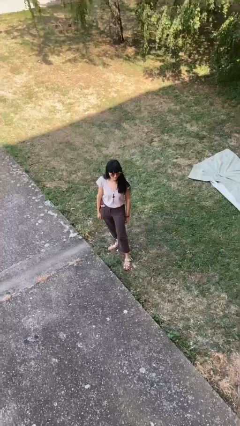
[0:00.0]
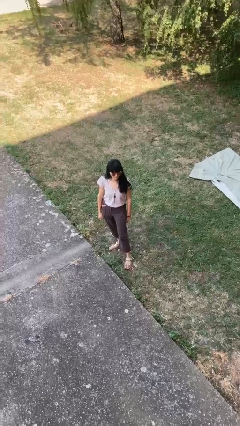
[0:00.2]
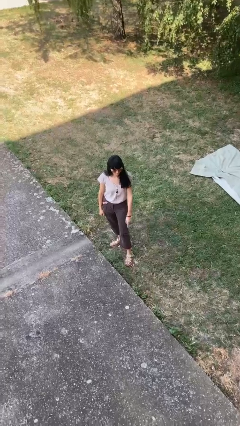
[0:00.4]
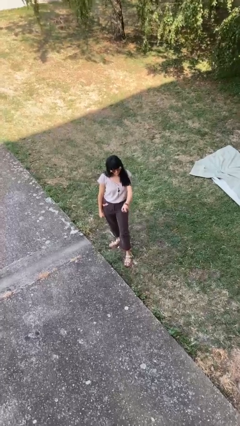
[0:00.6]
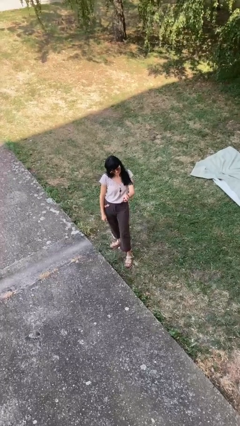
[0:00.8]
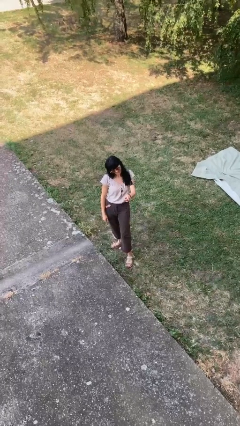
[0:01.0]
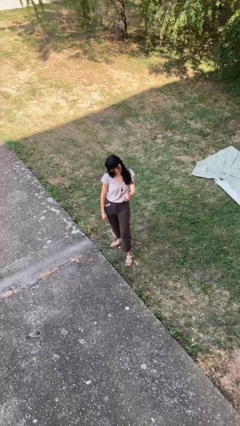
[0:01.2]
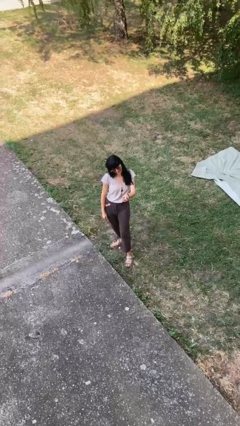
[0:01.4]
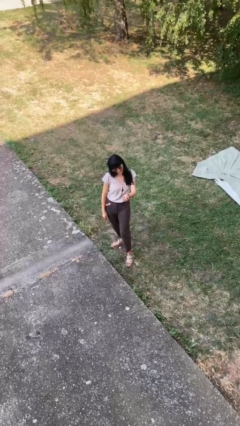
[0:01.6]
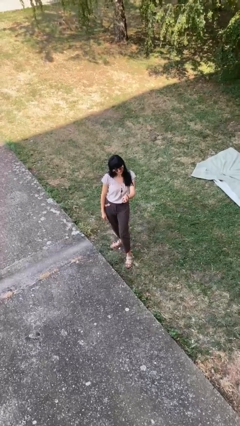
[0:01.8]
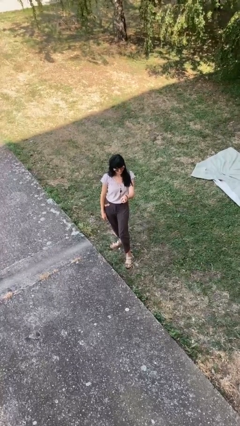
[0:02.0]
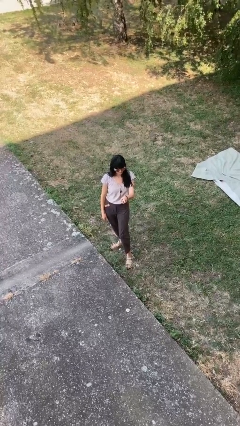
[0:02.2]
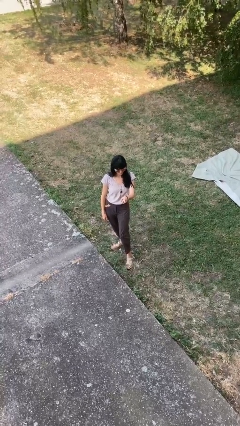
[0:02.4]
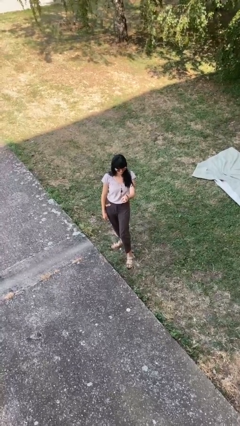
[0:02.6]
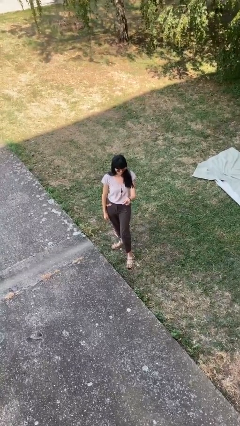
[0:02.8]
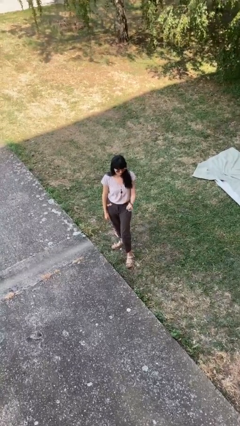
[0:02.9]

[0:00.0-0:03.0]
person points at person

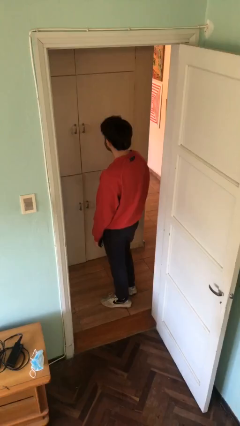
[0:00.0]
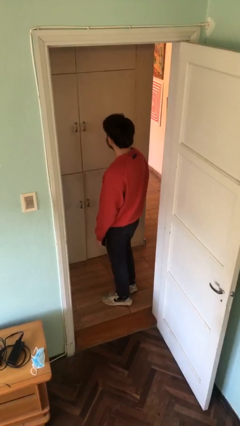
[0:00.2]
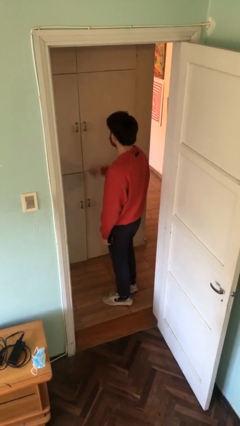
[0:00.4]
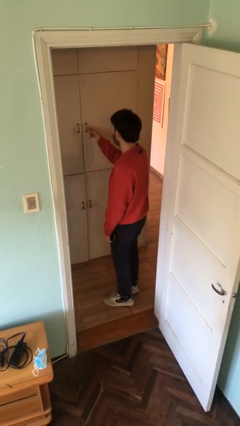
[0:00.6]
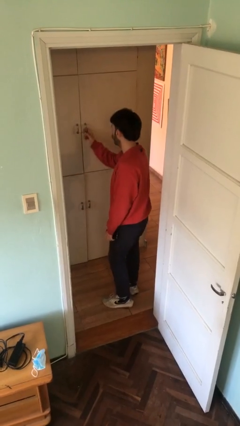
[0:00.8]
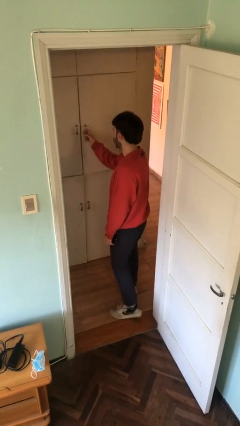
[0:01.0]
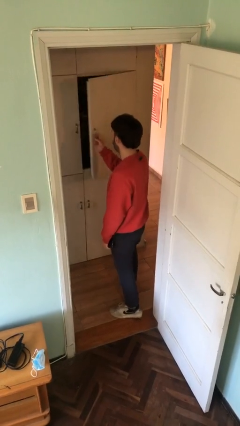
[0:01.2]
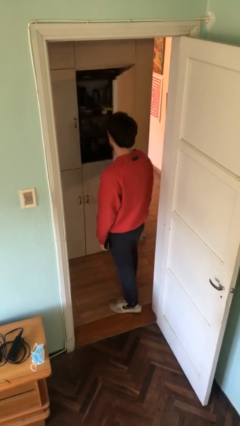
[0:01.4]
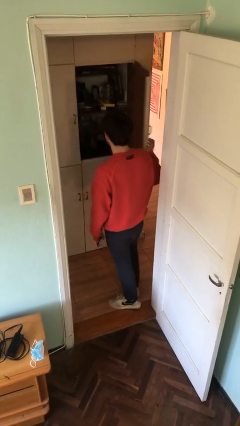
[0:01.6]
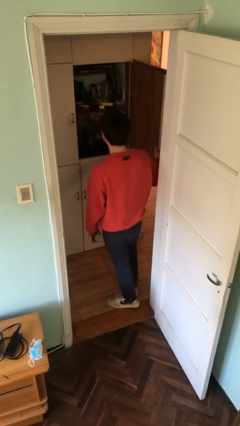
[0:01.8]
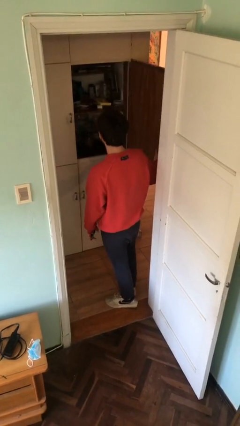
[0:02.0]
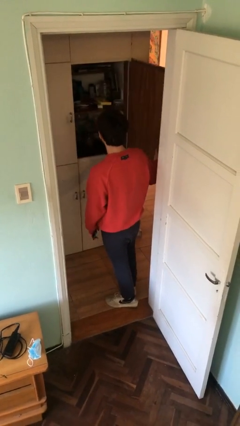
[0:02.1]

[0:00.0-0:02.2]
person opens closet door

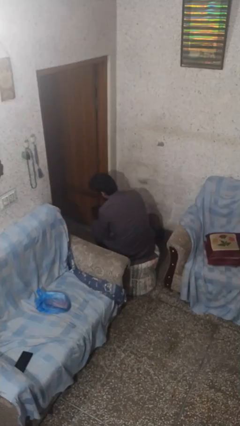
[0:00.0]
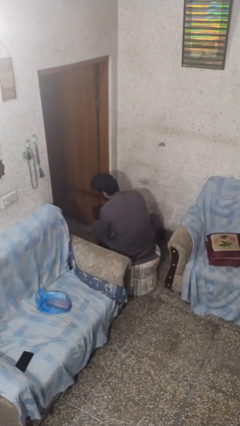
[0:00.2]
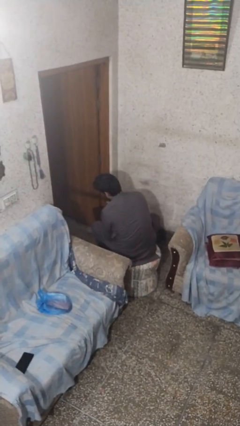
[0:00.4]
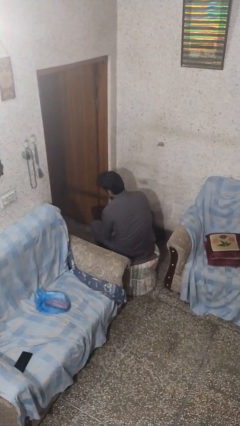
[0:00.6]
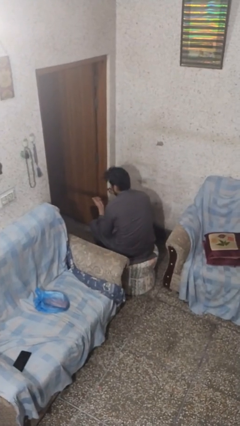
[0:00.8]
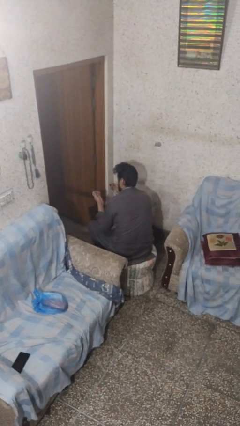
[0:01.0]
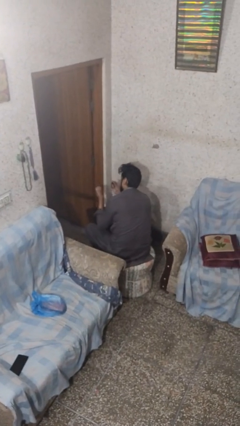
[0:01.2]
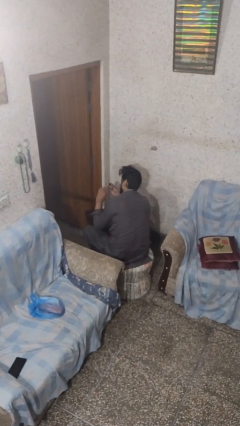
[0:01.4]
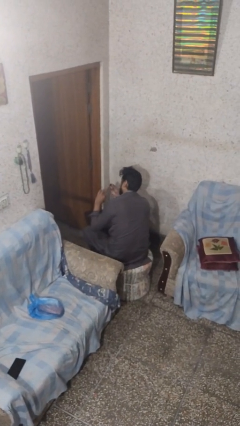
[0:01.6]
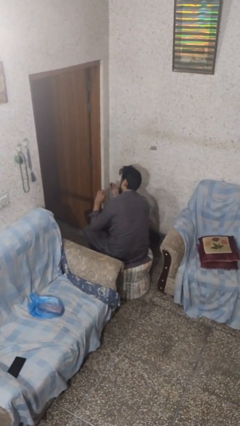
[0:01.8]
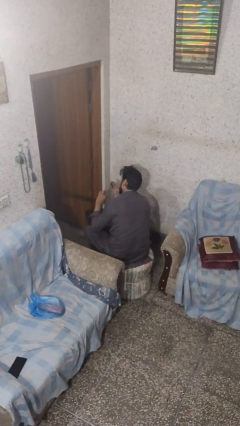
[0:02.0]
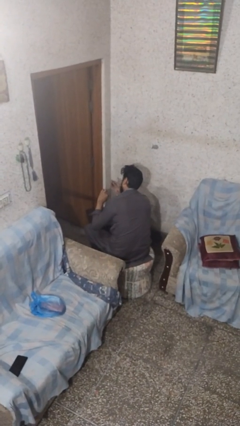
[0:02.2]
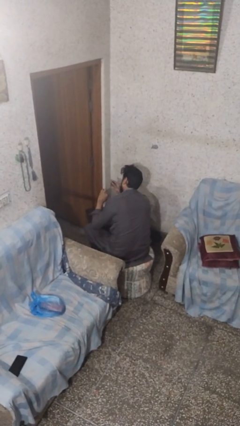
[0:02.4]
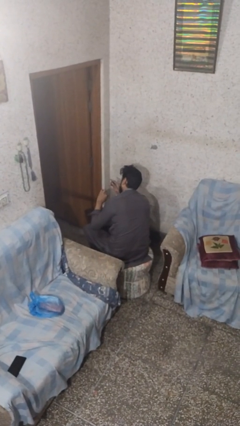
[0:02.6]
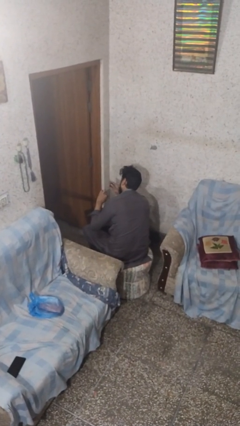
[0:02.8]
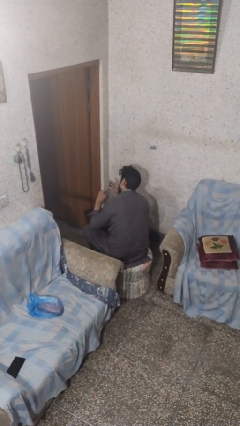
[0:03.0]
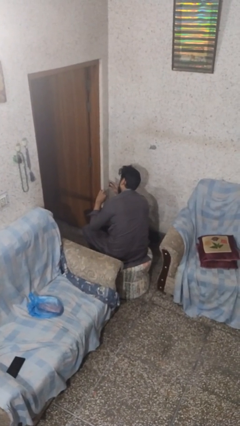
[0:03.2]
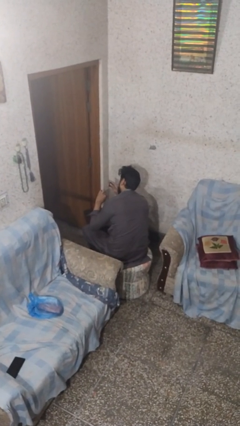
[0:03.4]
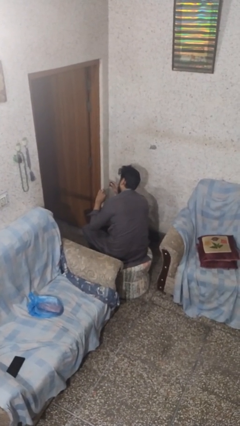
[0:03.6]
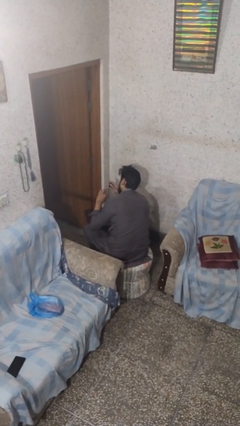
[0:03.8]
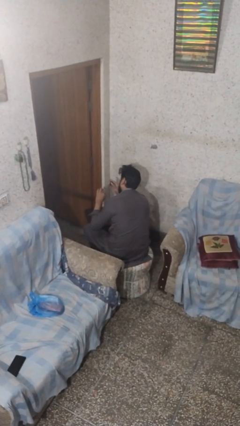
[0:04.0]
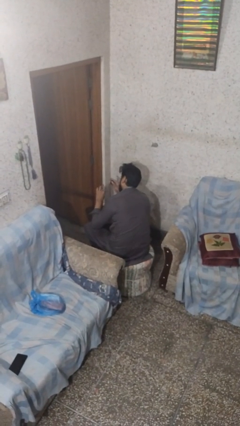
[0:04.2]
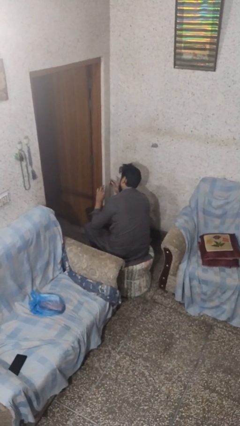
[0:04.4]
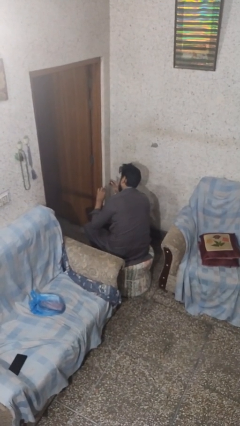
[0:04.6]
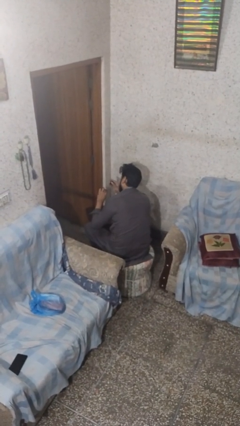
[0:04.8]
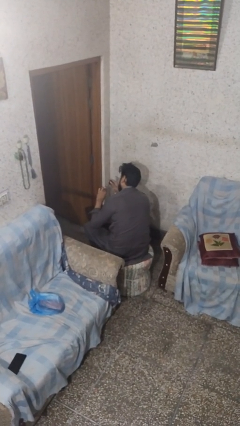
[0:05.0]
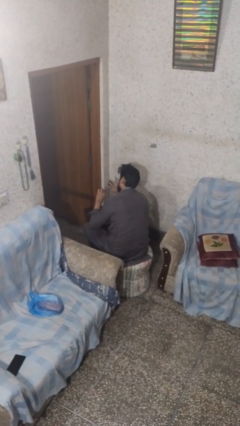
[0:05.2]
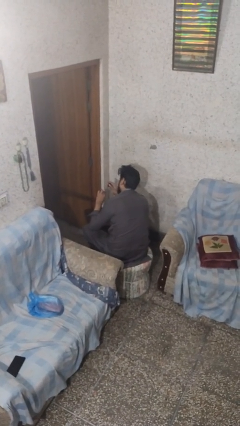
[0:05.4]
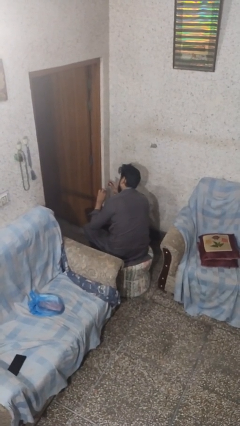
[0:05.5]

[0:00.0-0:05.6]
person paints fingernails

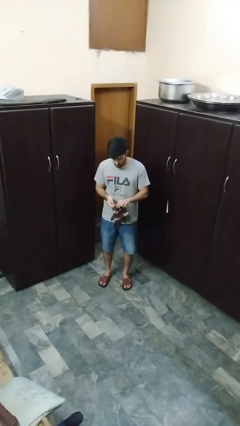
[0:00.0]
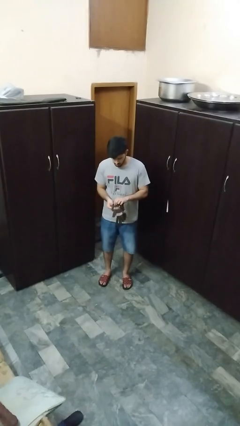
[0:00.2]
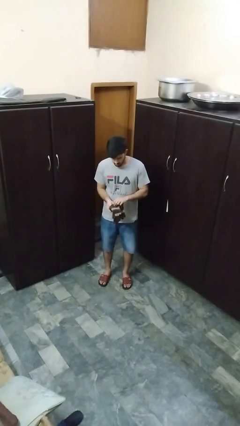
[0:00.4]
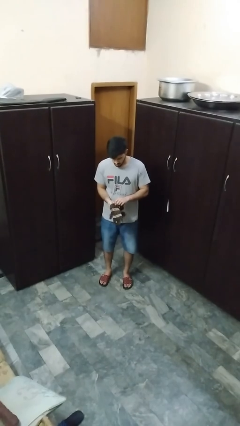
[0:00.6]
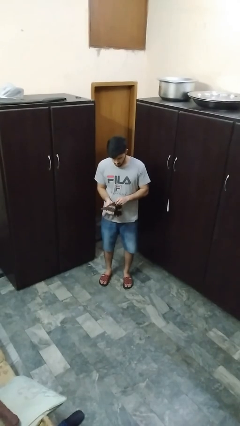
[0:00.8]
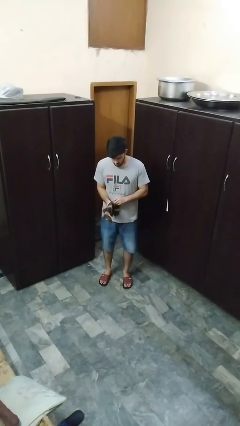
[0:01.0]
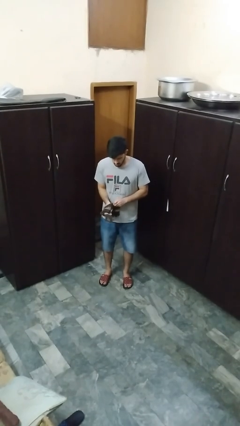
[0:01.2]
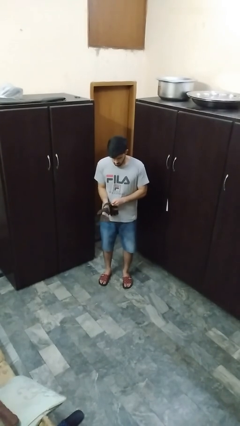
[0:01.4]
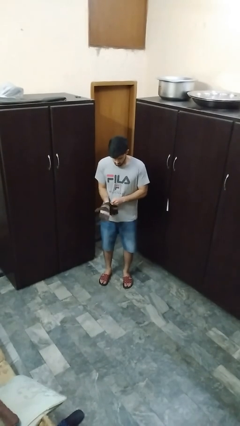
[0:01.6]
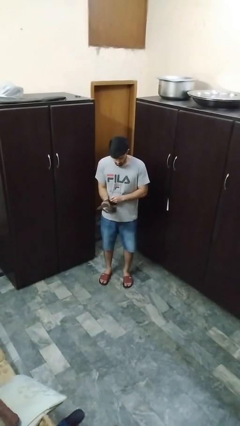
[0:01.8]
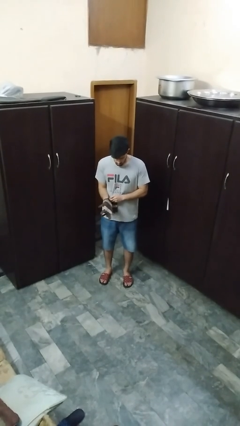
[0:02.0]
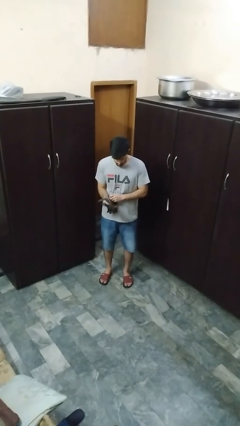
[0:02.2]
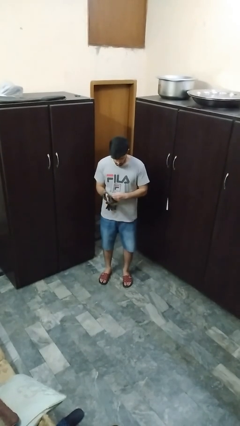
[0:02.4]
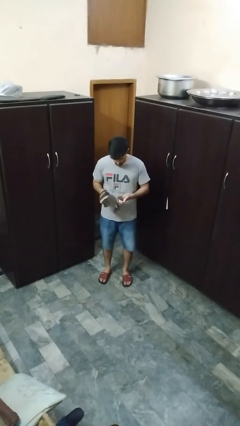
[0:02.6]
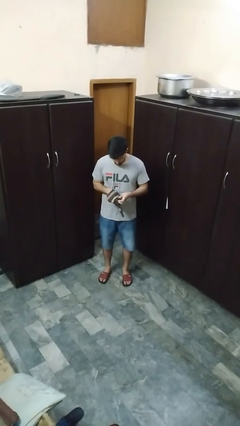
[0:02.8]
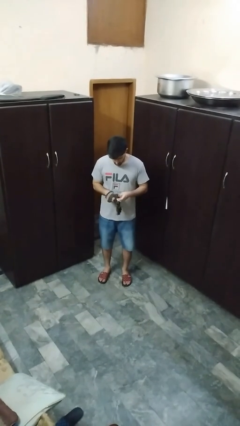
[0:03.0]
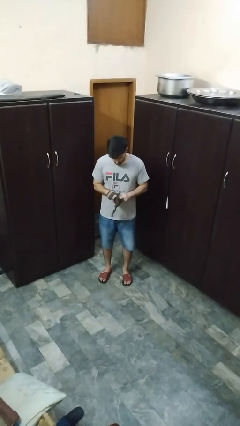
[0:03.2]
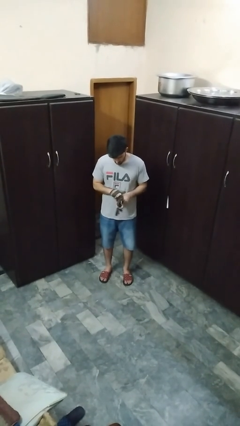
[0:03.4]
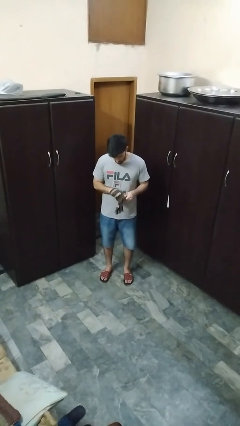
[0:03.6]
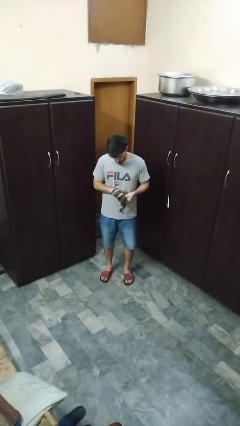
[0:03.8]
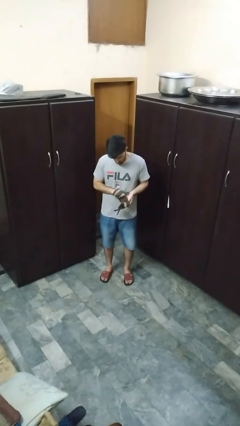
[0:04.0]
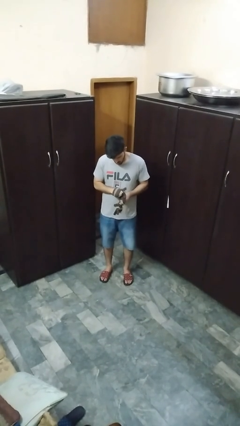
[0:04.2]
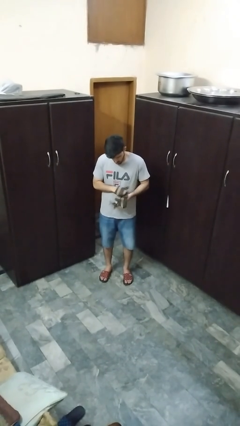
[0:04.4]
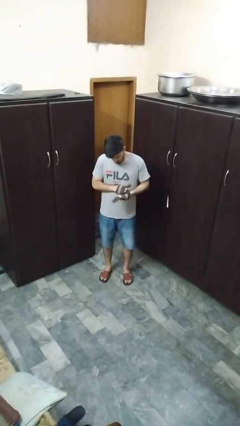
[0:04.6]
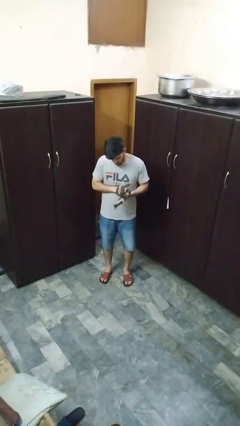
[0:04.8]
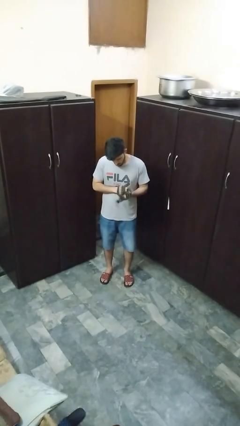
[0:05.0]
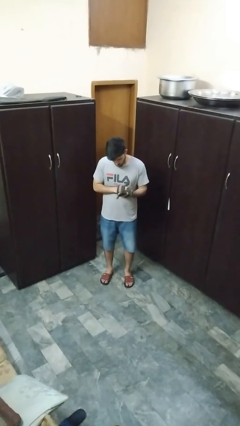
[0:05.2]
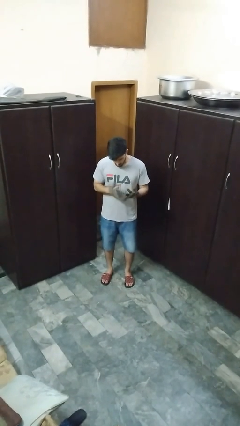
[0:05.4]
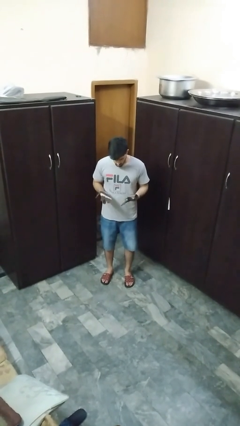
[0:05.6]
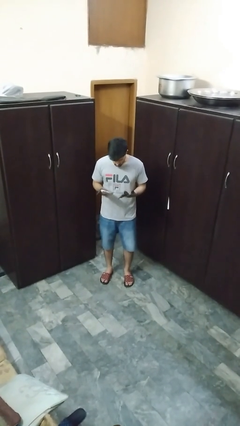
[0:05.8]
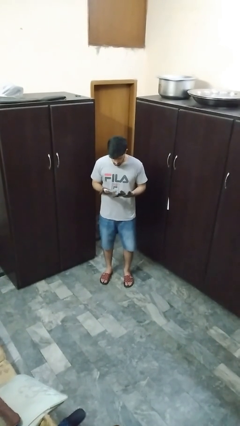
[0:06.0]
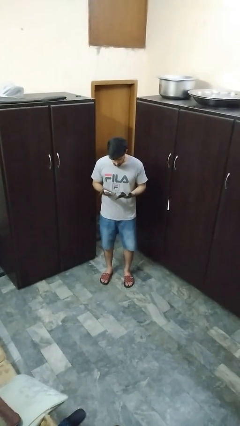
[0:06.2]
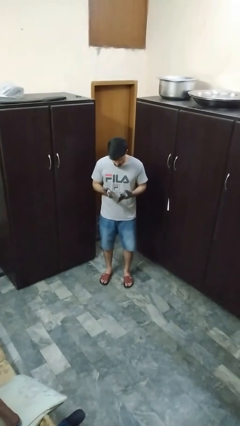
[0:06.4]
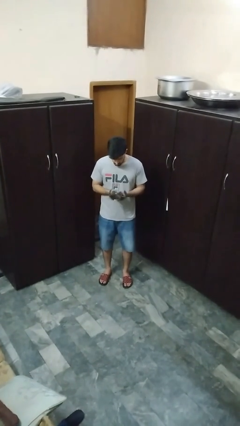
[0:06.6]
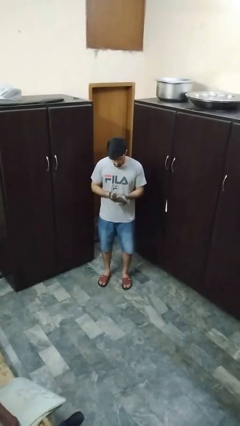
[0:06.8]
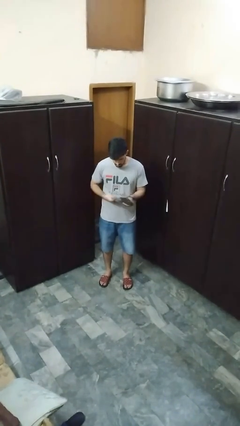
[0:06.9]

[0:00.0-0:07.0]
person puts on gloves
